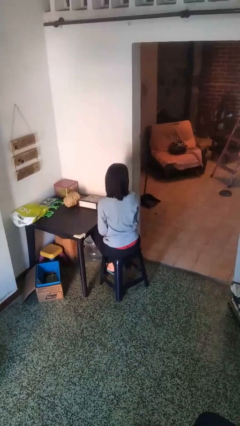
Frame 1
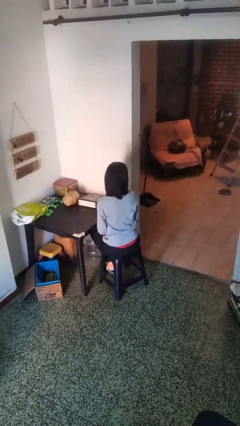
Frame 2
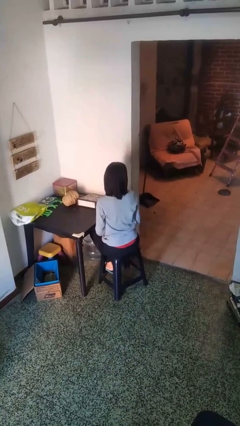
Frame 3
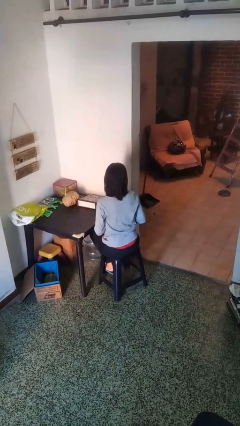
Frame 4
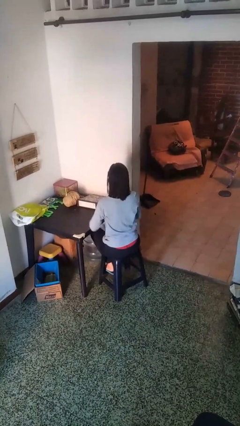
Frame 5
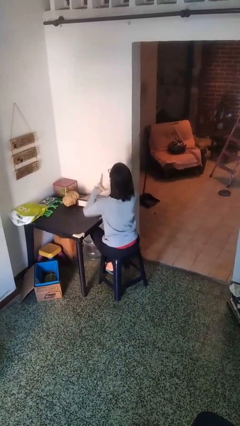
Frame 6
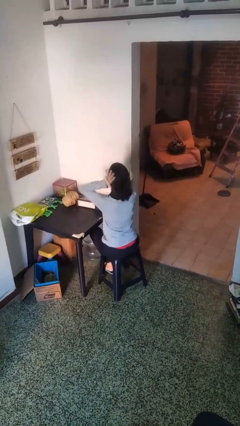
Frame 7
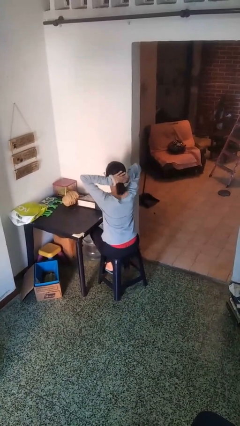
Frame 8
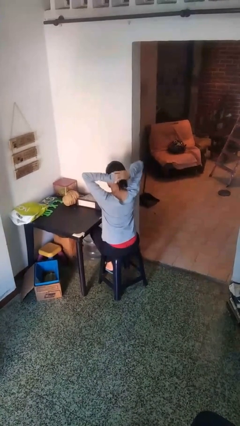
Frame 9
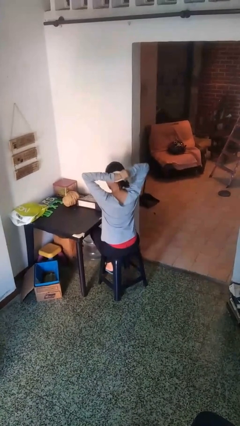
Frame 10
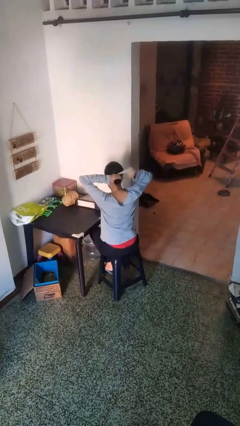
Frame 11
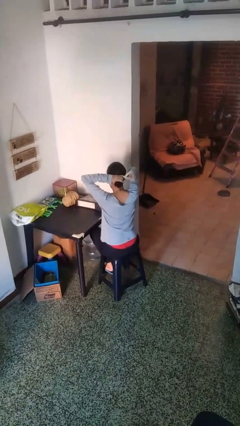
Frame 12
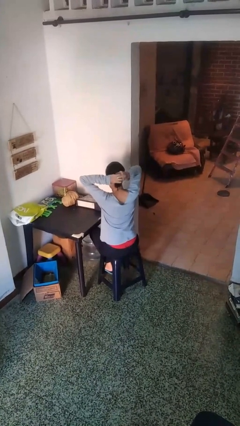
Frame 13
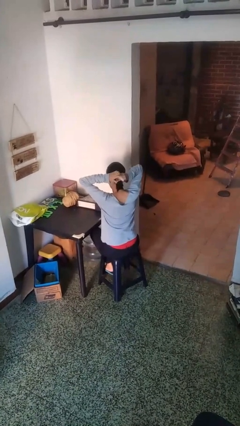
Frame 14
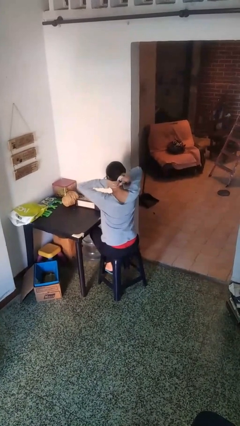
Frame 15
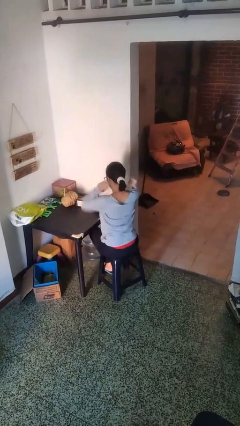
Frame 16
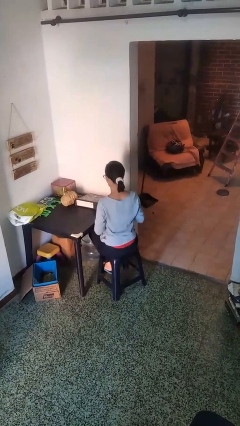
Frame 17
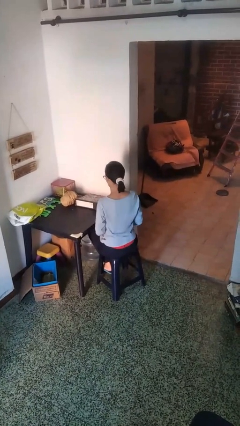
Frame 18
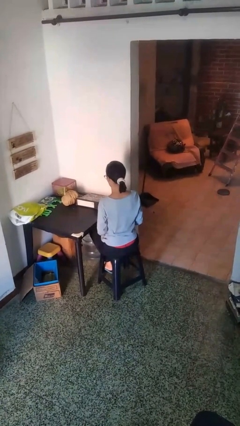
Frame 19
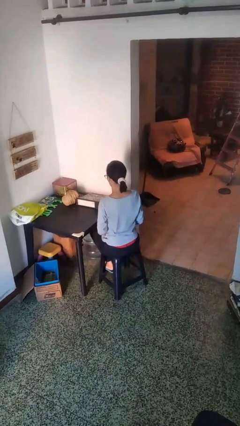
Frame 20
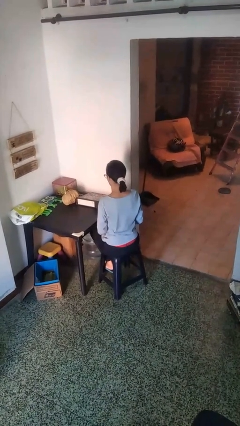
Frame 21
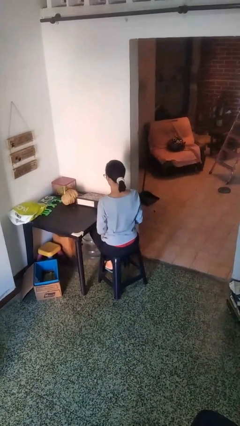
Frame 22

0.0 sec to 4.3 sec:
person puts hair in ponytail

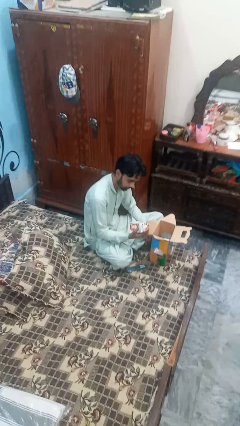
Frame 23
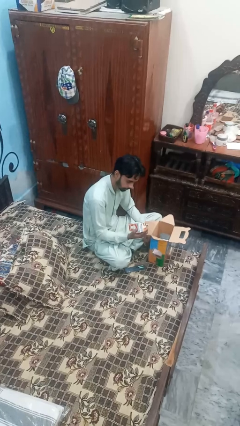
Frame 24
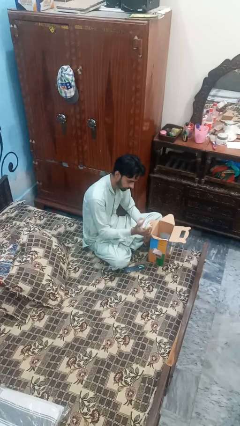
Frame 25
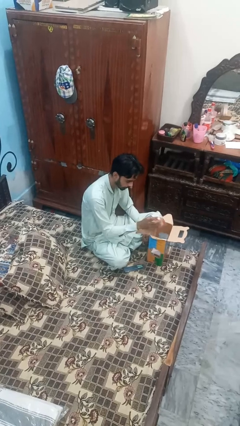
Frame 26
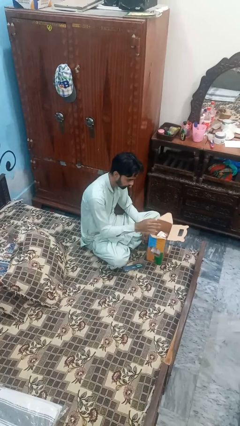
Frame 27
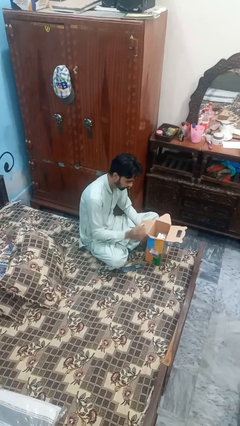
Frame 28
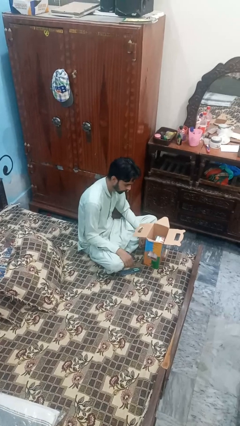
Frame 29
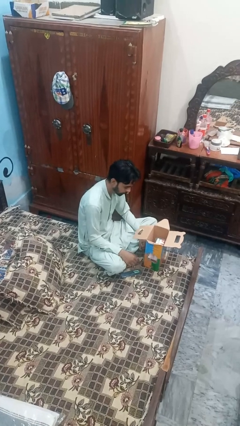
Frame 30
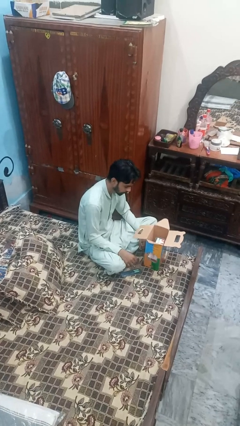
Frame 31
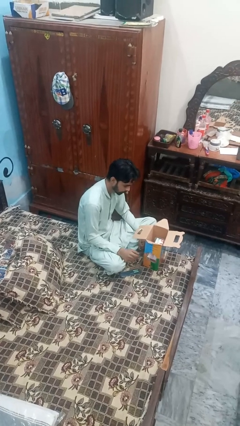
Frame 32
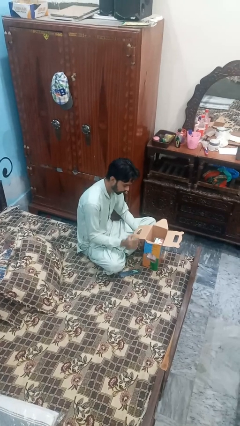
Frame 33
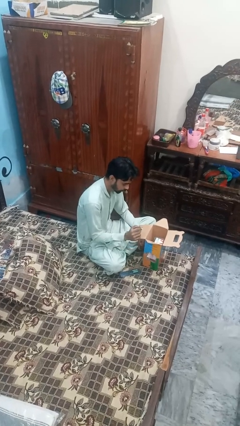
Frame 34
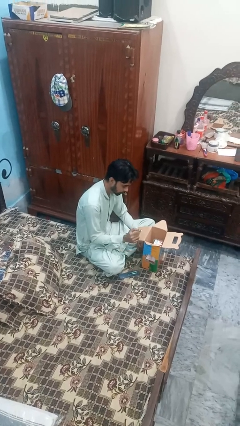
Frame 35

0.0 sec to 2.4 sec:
person puts object into box

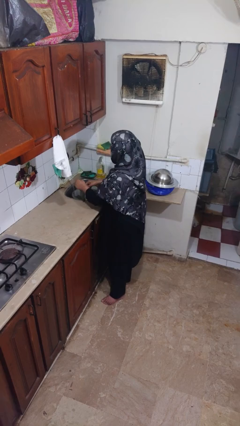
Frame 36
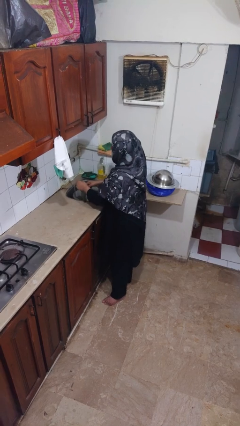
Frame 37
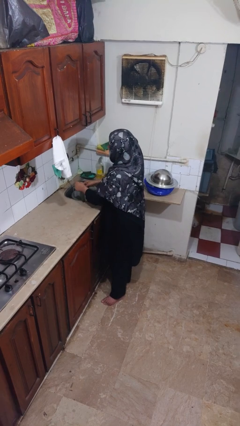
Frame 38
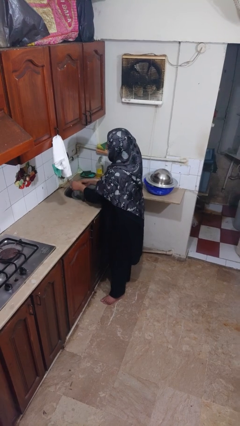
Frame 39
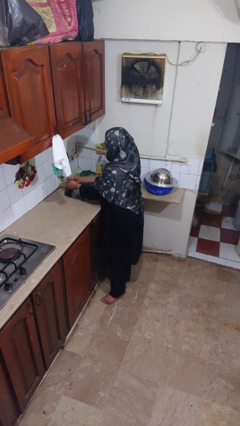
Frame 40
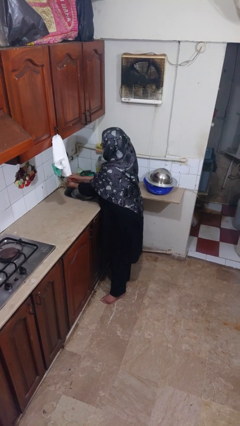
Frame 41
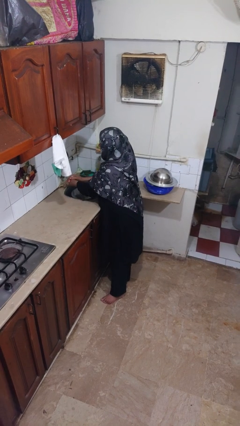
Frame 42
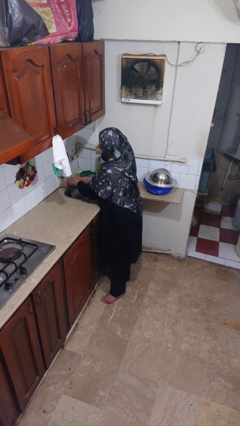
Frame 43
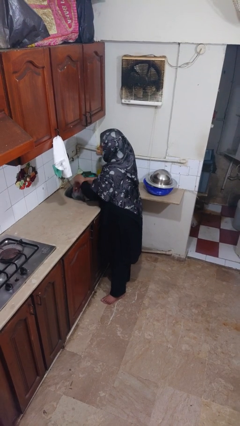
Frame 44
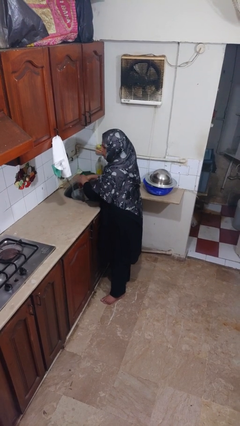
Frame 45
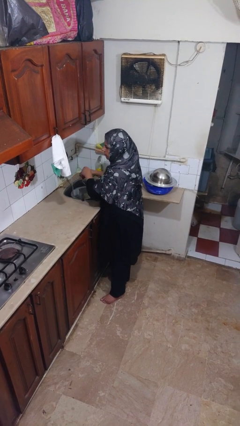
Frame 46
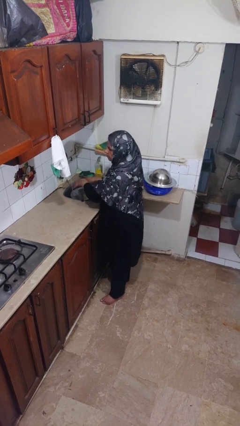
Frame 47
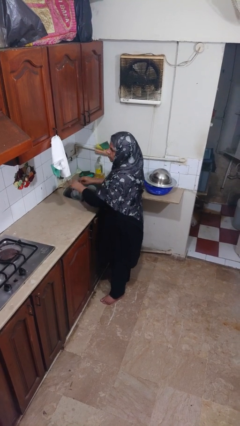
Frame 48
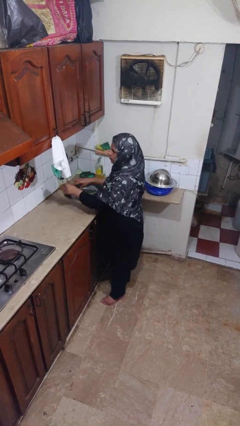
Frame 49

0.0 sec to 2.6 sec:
person washes hands

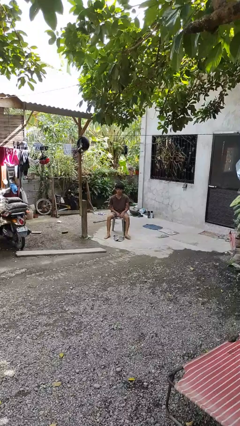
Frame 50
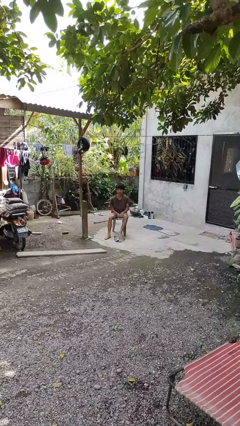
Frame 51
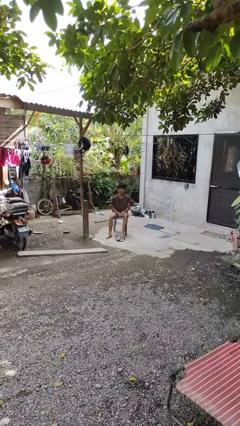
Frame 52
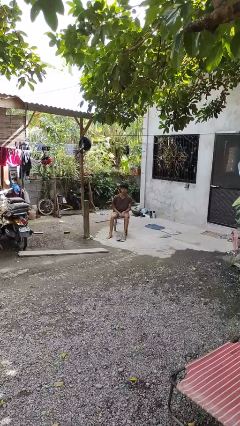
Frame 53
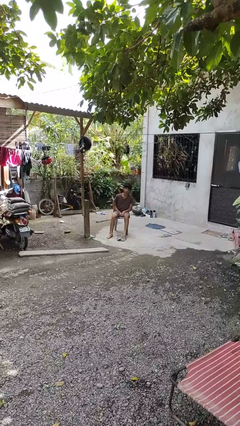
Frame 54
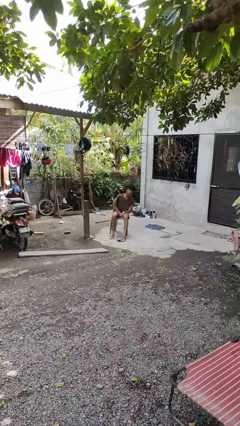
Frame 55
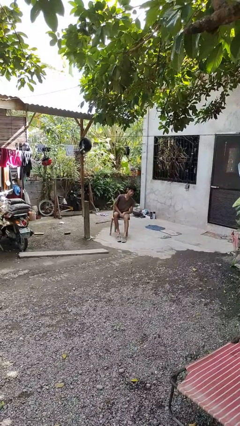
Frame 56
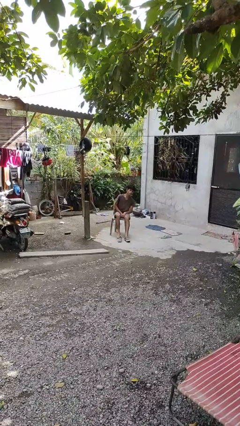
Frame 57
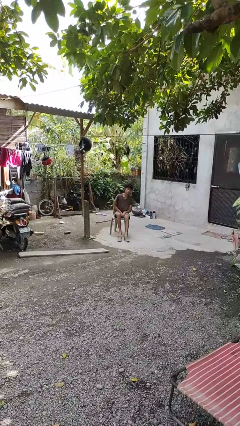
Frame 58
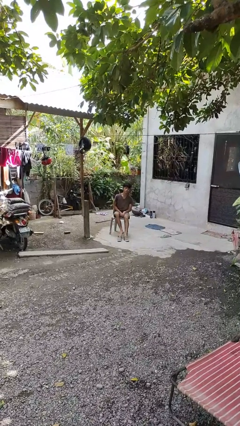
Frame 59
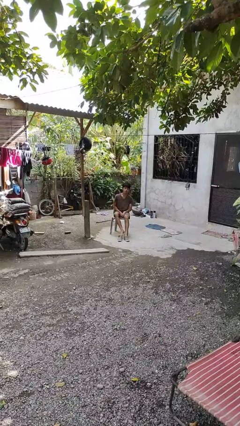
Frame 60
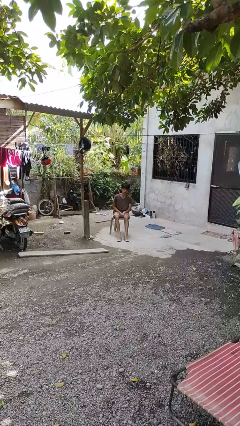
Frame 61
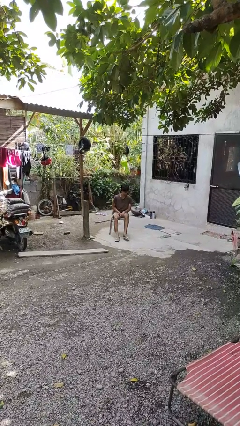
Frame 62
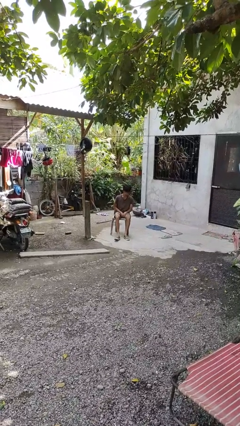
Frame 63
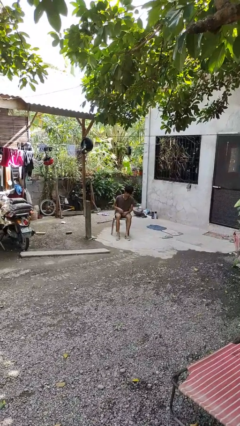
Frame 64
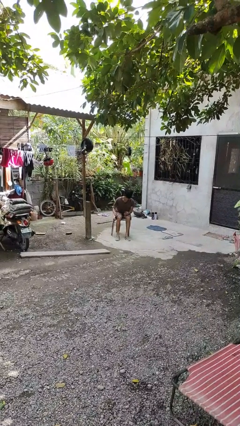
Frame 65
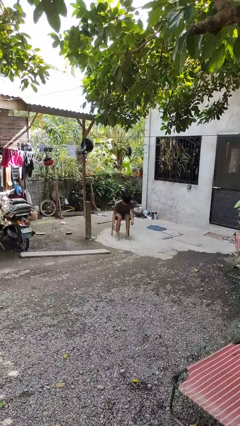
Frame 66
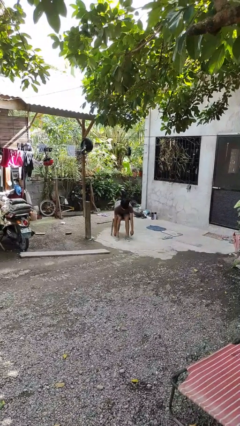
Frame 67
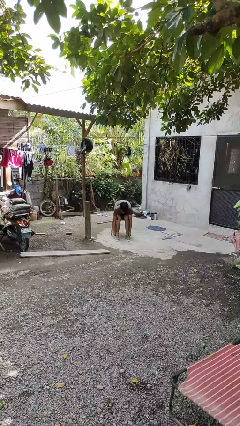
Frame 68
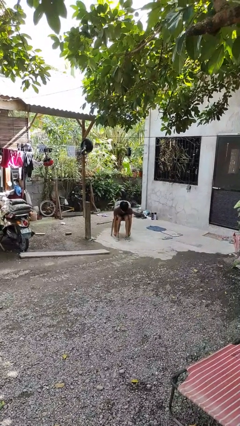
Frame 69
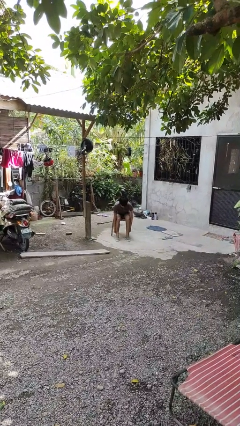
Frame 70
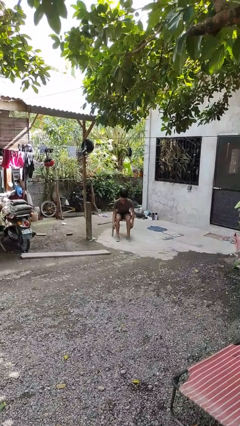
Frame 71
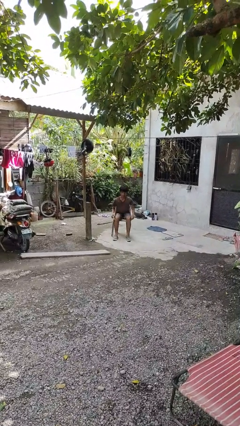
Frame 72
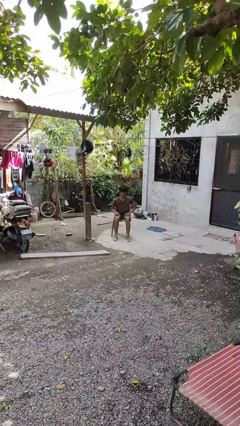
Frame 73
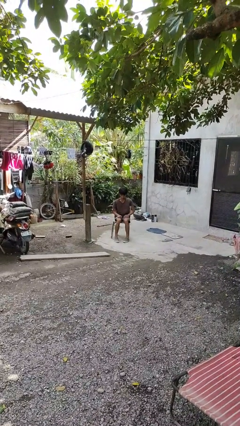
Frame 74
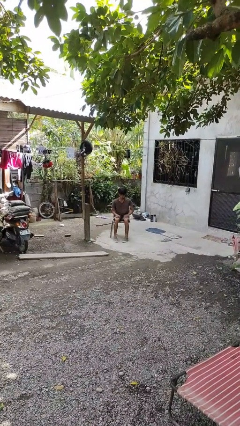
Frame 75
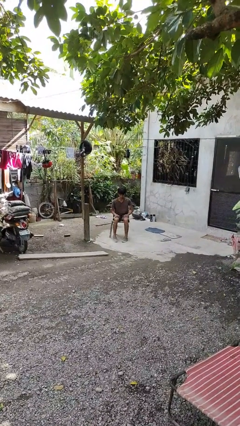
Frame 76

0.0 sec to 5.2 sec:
person puts on shoes

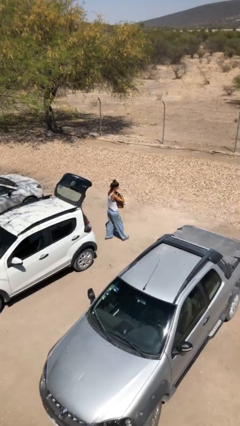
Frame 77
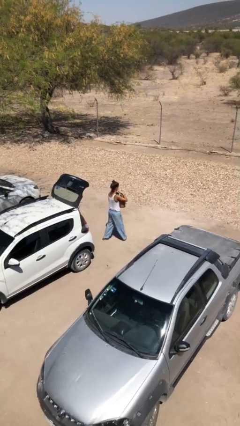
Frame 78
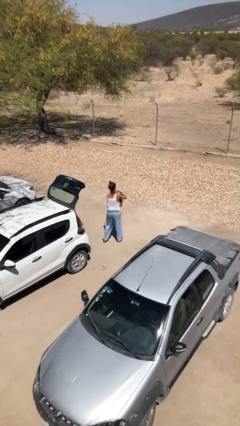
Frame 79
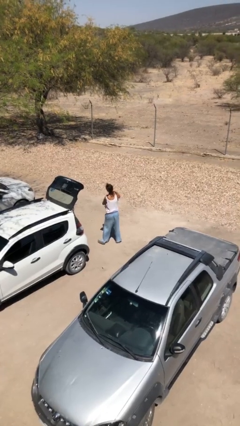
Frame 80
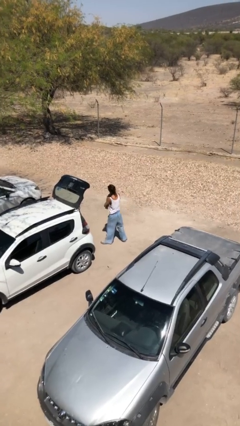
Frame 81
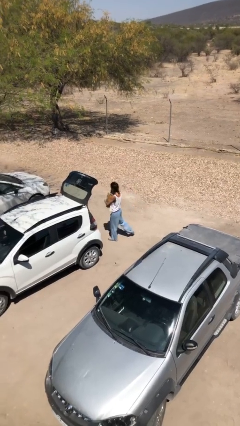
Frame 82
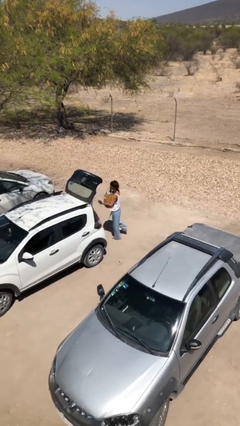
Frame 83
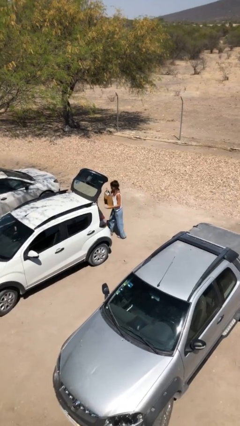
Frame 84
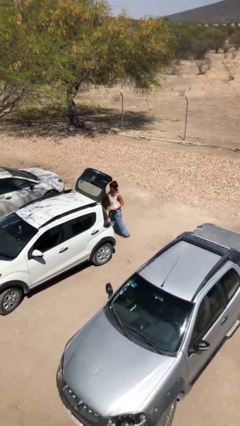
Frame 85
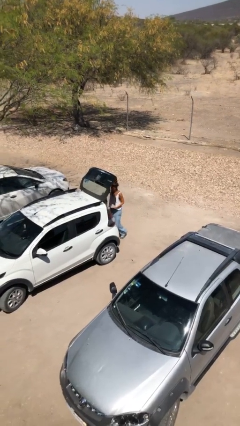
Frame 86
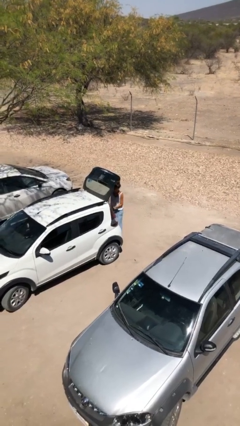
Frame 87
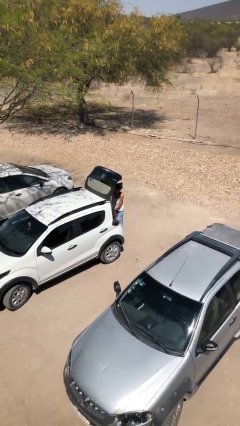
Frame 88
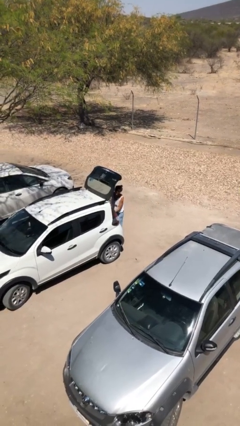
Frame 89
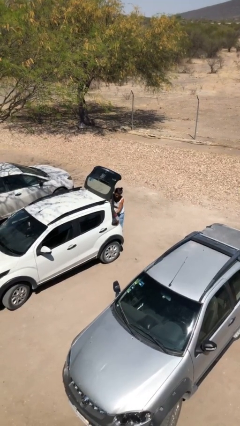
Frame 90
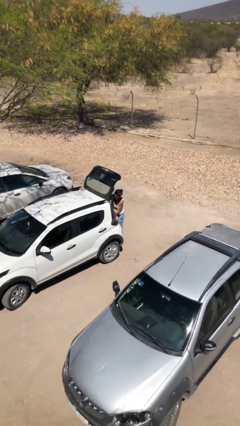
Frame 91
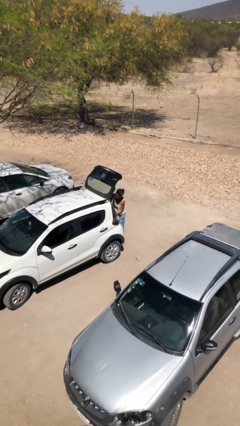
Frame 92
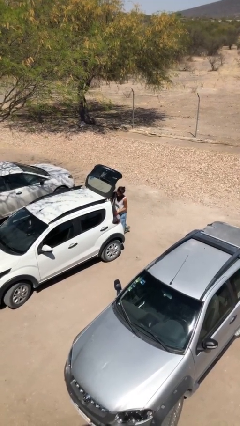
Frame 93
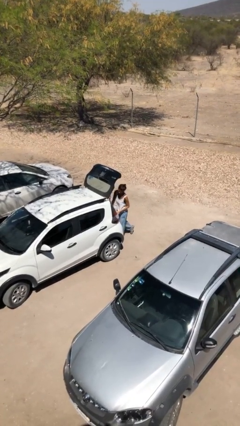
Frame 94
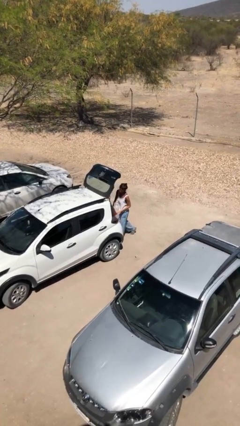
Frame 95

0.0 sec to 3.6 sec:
person loads car
